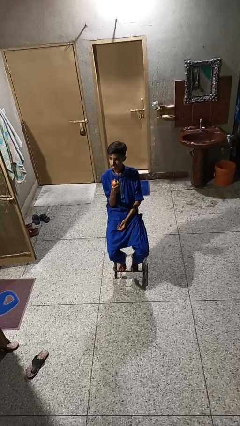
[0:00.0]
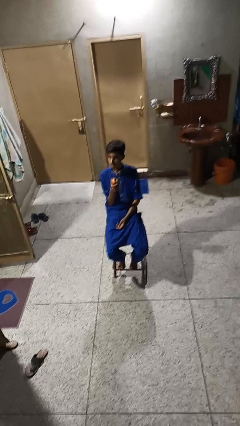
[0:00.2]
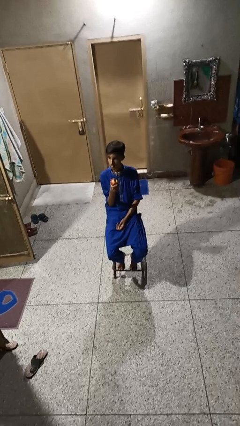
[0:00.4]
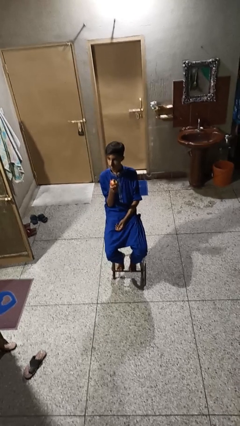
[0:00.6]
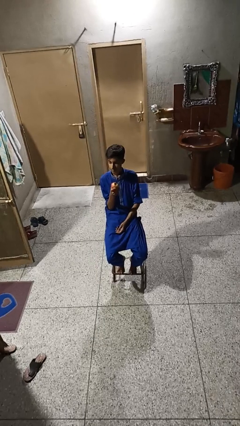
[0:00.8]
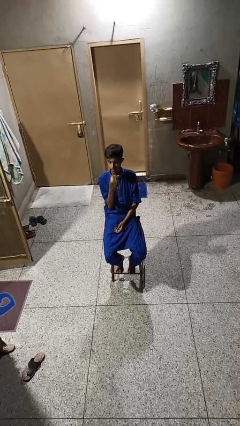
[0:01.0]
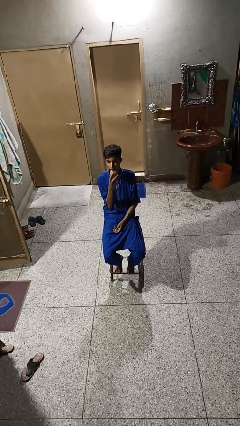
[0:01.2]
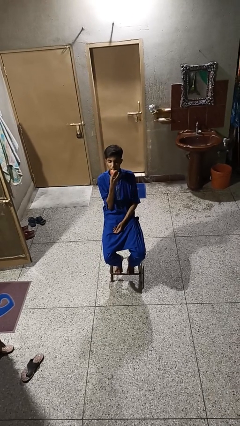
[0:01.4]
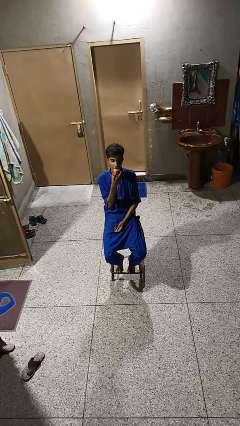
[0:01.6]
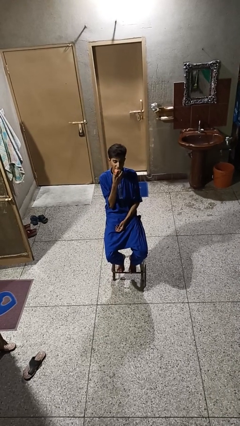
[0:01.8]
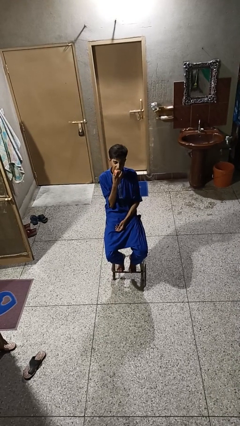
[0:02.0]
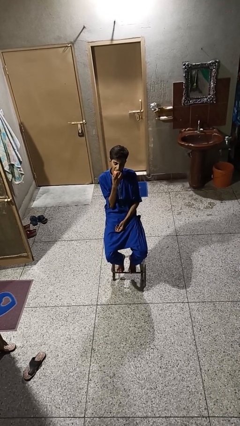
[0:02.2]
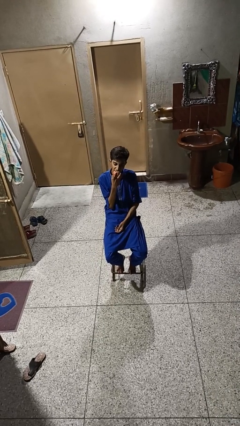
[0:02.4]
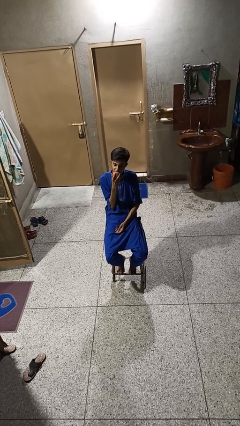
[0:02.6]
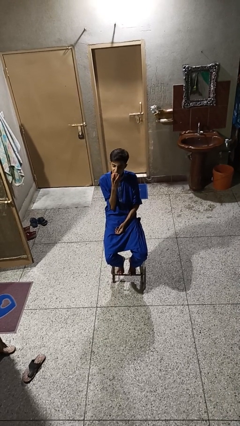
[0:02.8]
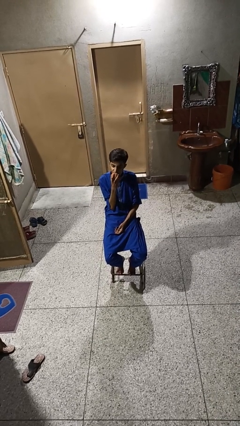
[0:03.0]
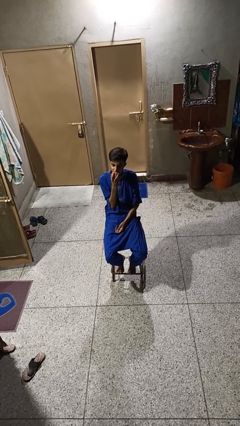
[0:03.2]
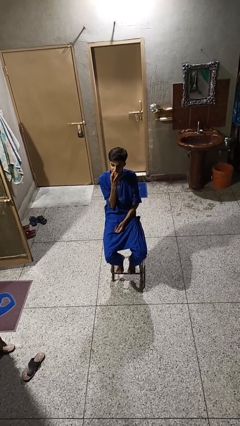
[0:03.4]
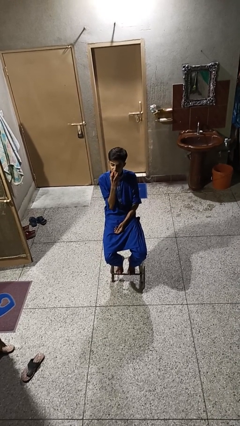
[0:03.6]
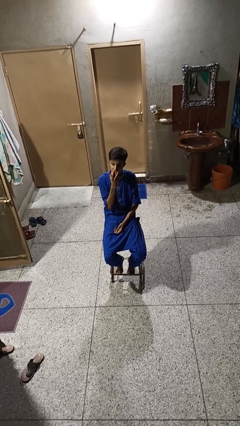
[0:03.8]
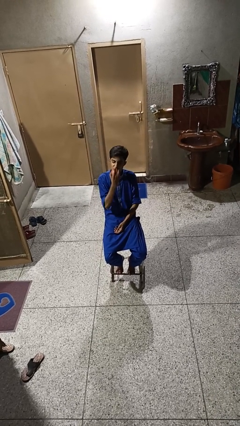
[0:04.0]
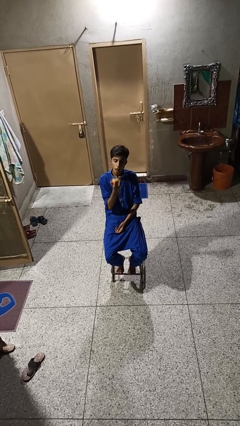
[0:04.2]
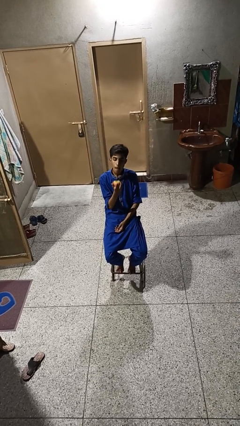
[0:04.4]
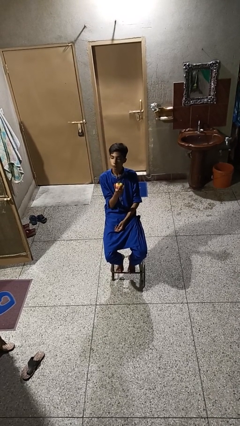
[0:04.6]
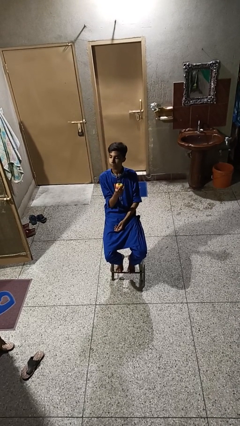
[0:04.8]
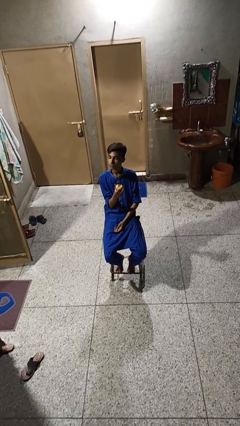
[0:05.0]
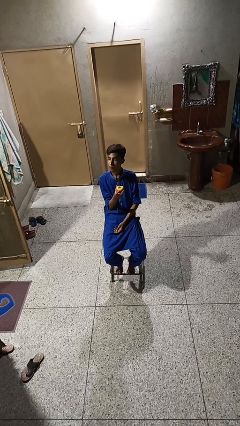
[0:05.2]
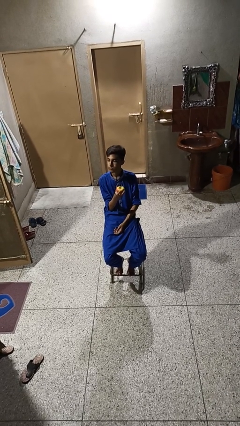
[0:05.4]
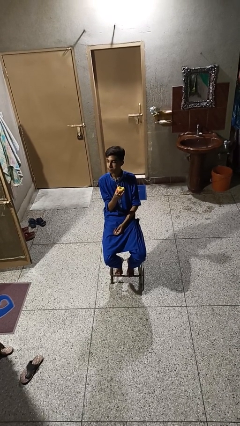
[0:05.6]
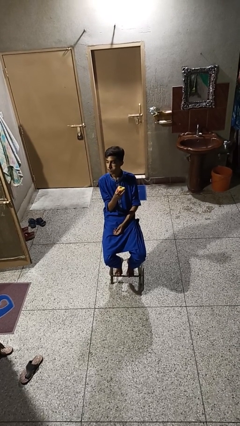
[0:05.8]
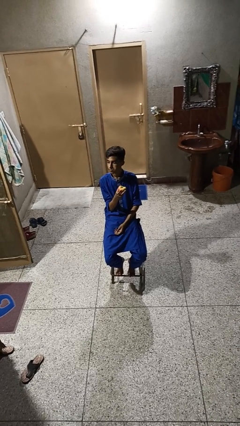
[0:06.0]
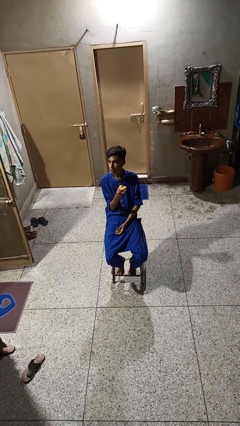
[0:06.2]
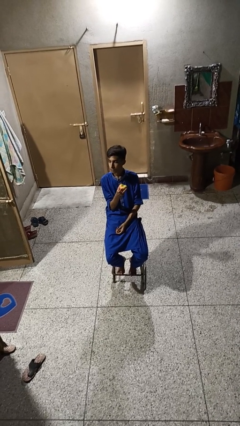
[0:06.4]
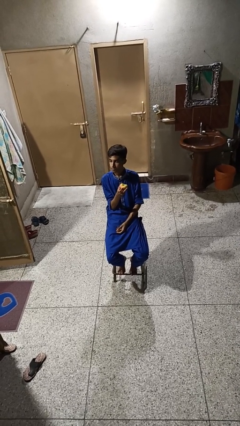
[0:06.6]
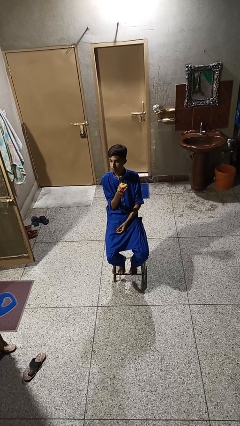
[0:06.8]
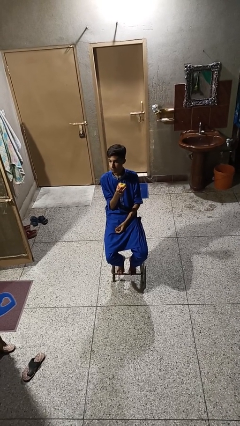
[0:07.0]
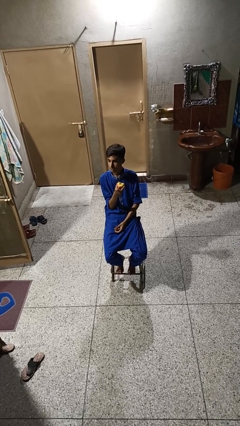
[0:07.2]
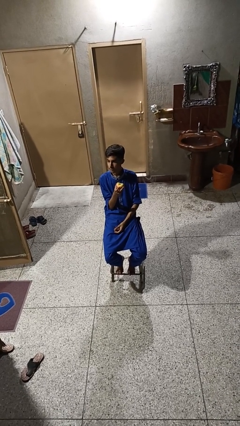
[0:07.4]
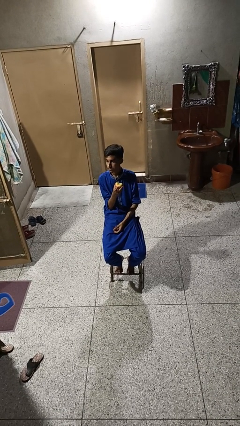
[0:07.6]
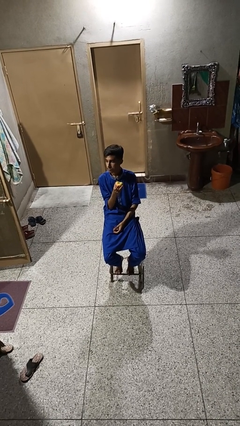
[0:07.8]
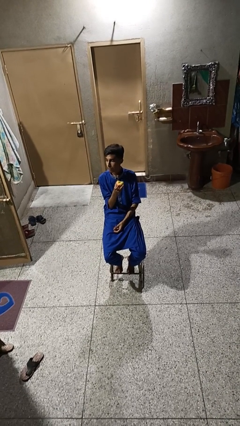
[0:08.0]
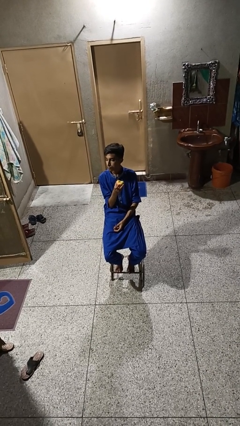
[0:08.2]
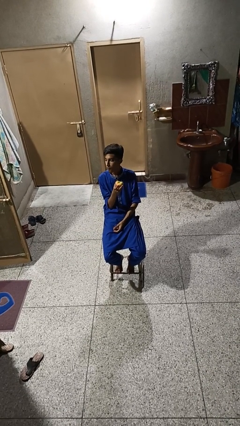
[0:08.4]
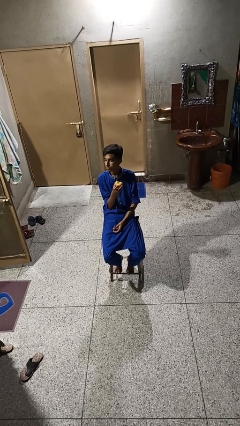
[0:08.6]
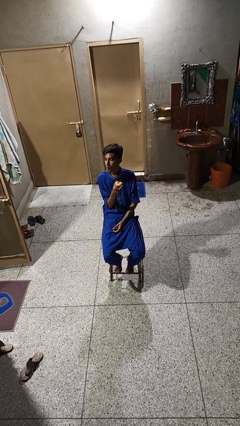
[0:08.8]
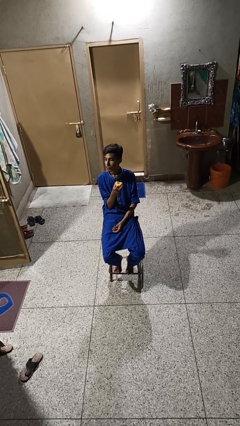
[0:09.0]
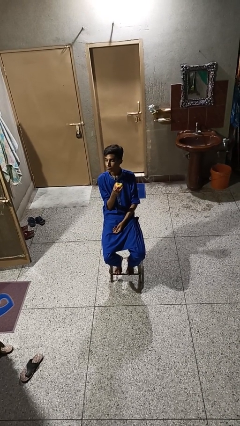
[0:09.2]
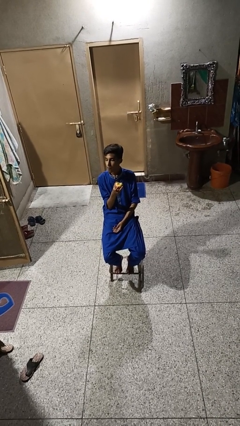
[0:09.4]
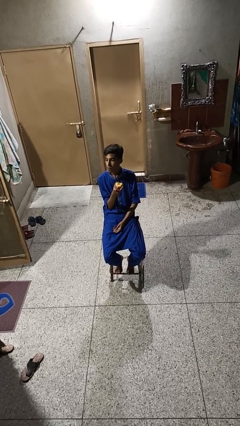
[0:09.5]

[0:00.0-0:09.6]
person eats apple

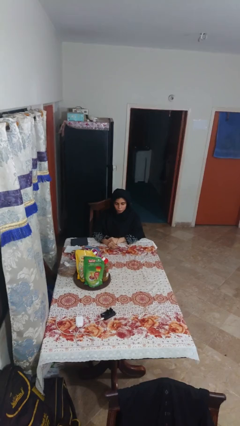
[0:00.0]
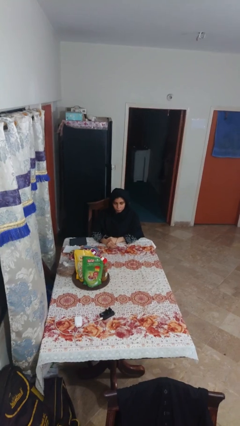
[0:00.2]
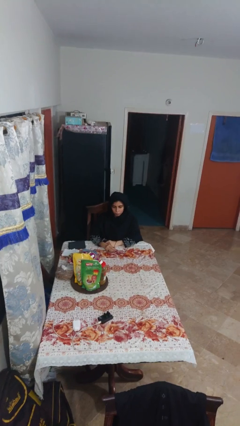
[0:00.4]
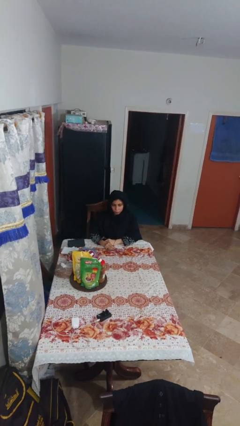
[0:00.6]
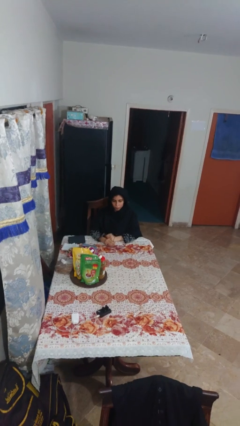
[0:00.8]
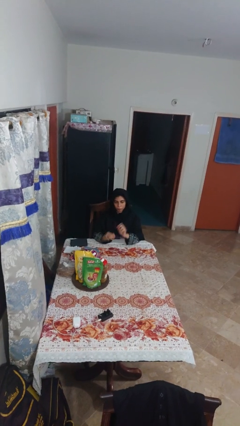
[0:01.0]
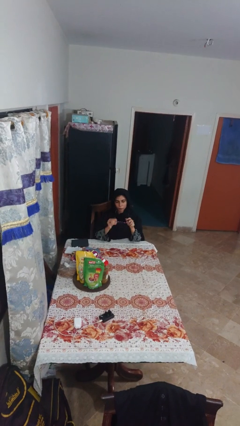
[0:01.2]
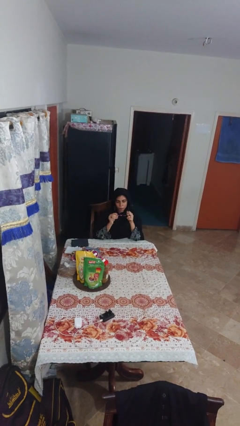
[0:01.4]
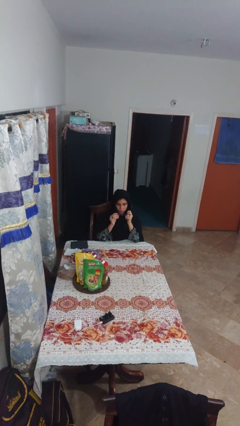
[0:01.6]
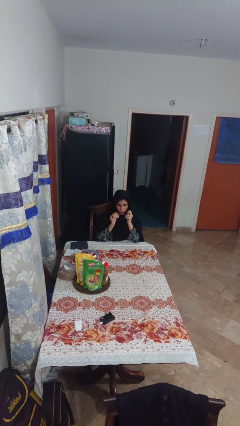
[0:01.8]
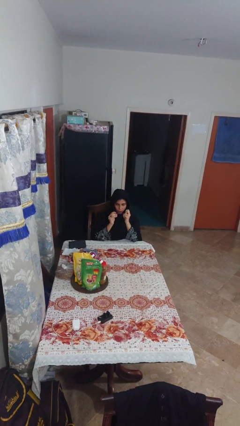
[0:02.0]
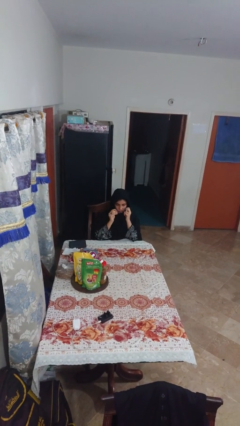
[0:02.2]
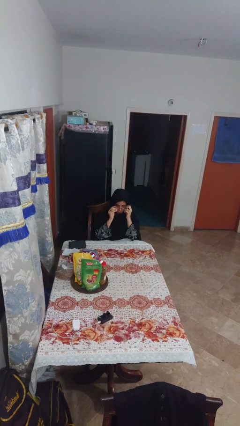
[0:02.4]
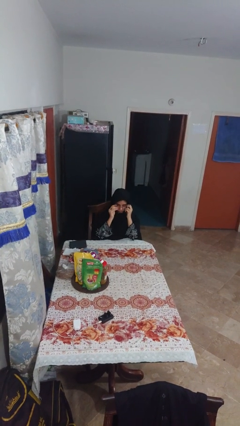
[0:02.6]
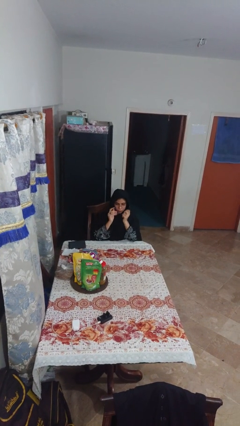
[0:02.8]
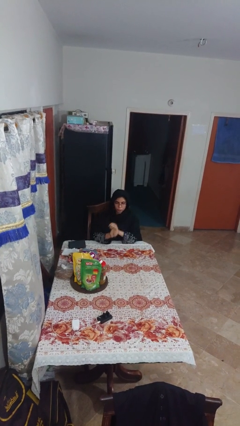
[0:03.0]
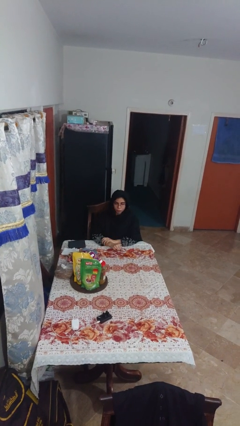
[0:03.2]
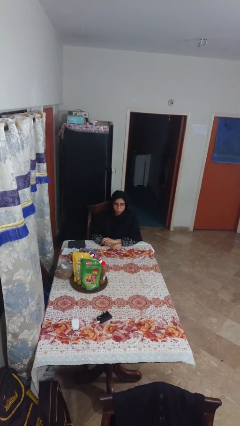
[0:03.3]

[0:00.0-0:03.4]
person puts on glasses

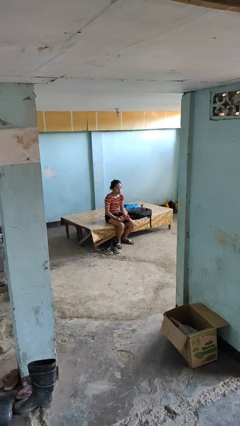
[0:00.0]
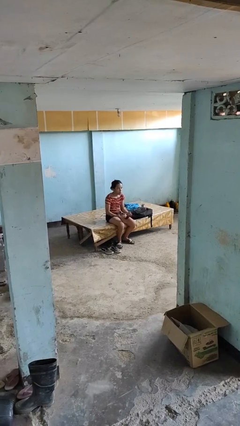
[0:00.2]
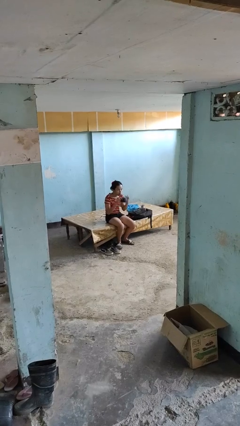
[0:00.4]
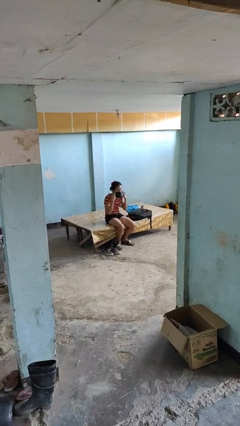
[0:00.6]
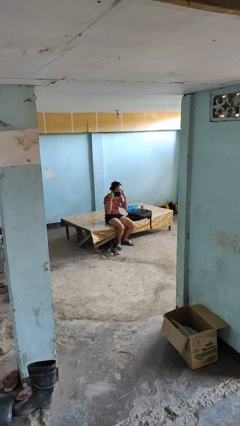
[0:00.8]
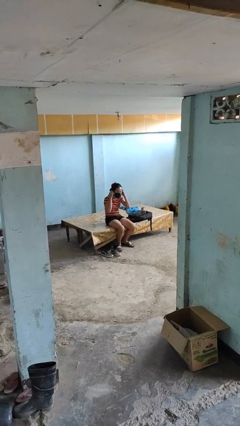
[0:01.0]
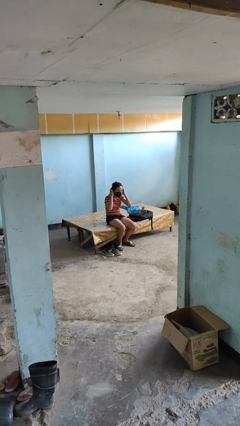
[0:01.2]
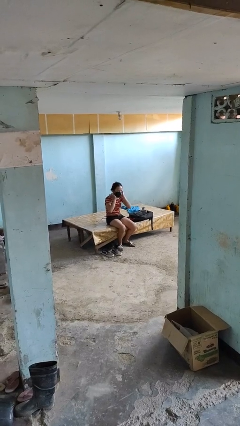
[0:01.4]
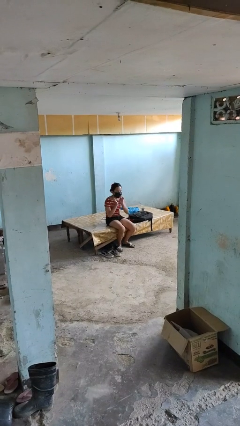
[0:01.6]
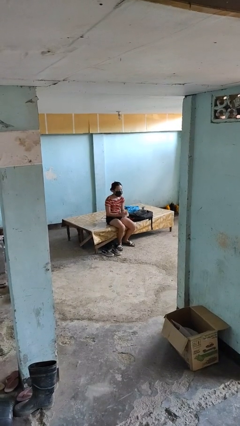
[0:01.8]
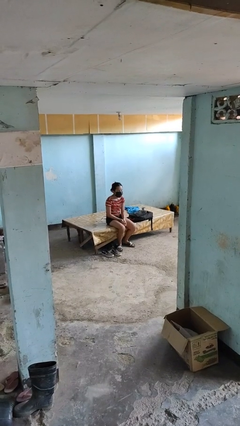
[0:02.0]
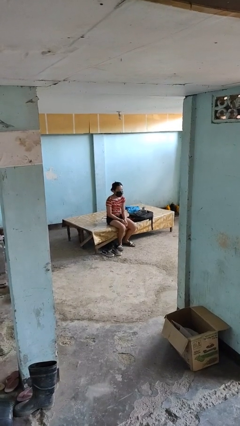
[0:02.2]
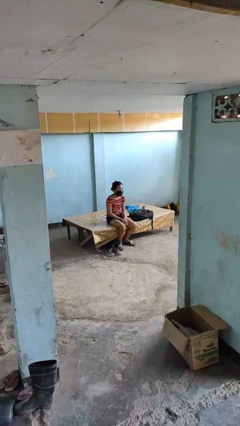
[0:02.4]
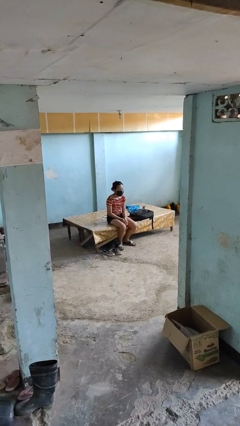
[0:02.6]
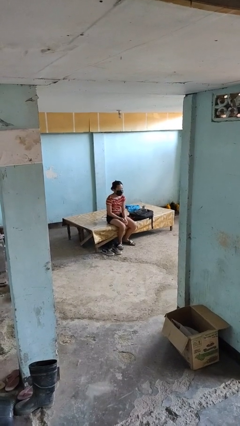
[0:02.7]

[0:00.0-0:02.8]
person puts on facemask

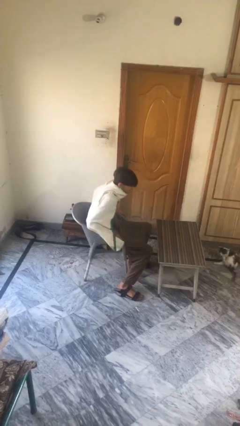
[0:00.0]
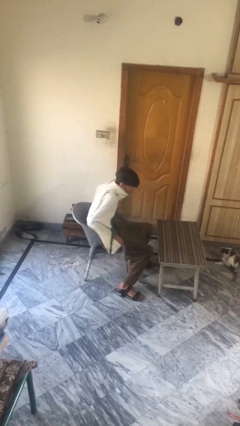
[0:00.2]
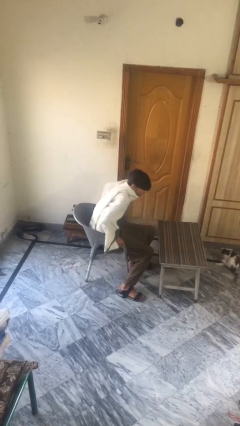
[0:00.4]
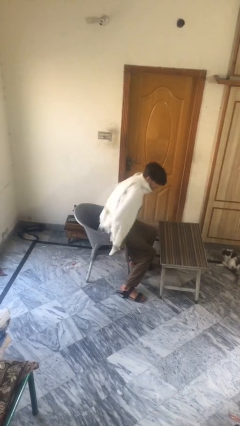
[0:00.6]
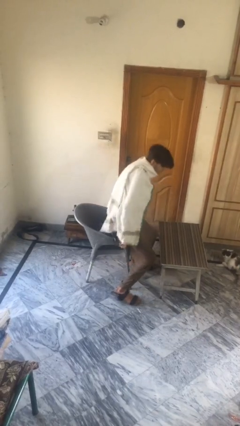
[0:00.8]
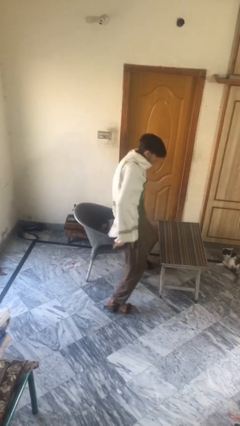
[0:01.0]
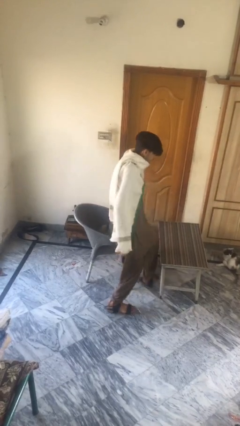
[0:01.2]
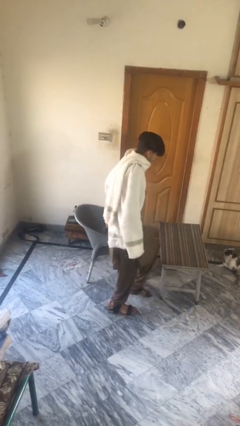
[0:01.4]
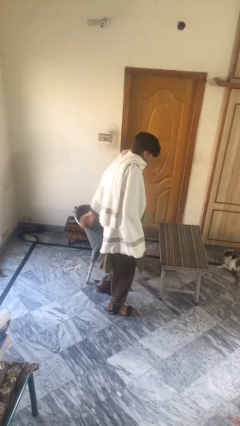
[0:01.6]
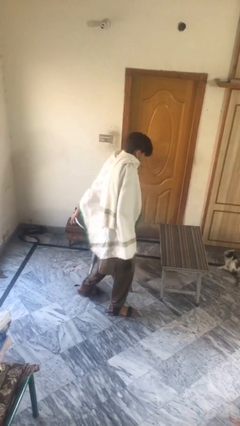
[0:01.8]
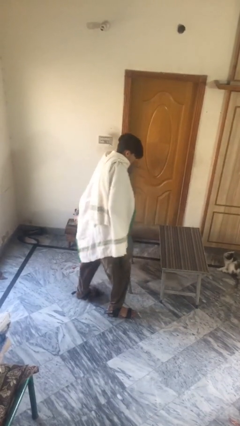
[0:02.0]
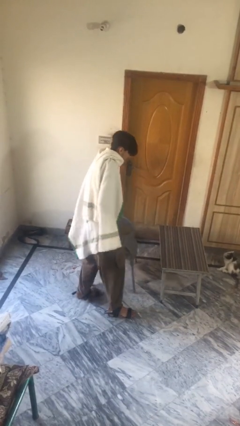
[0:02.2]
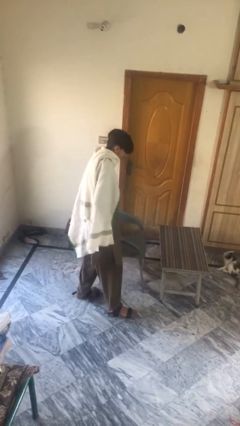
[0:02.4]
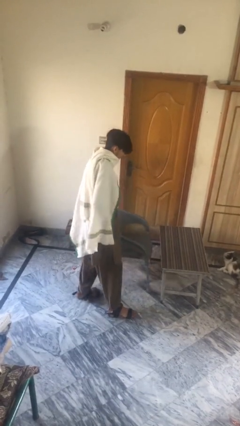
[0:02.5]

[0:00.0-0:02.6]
person stands up
